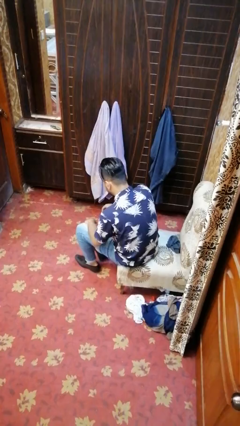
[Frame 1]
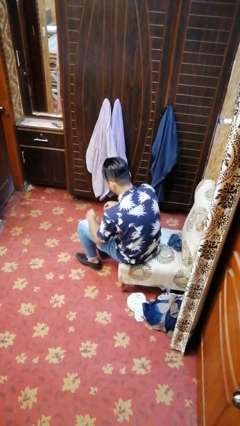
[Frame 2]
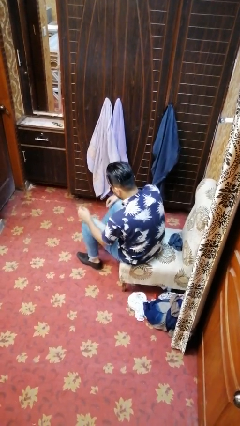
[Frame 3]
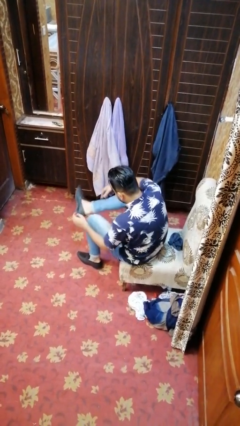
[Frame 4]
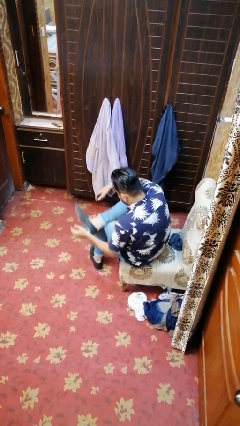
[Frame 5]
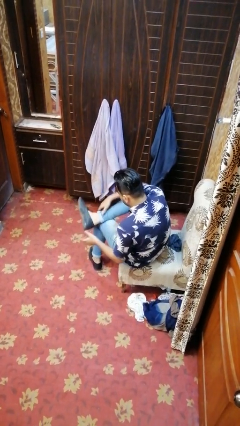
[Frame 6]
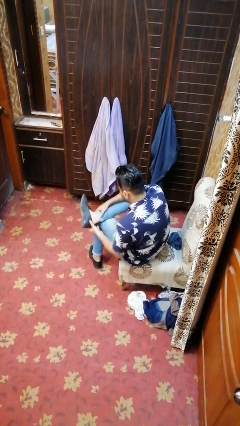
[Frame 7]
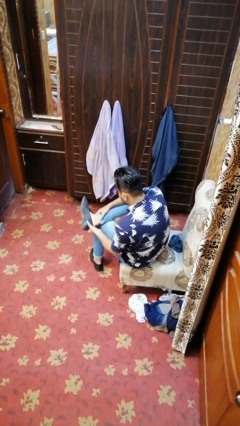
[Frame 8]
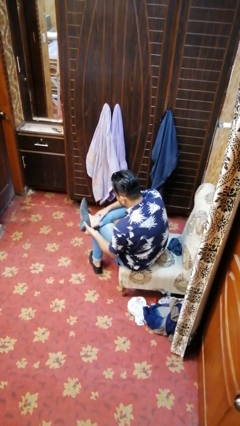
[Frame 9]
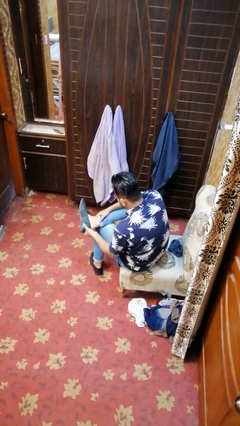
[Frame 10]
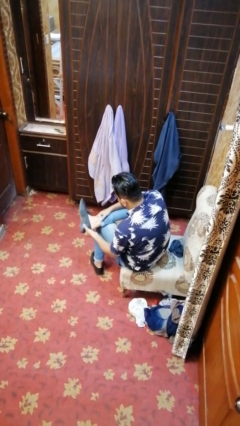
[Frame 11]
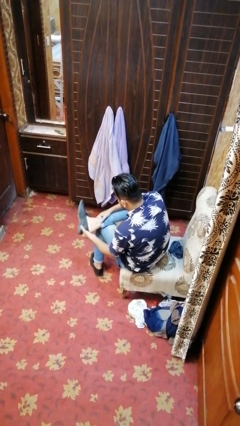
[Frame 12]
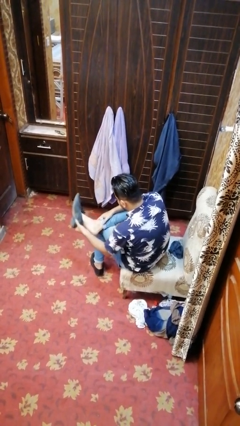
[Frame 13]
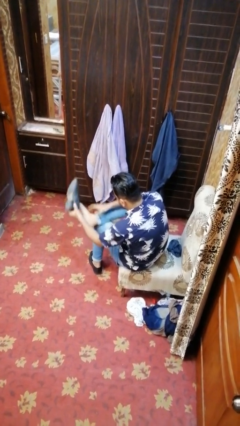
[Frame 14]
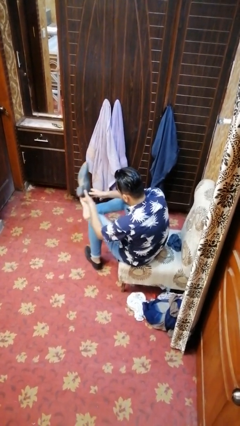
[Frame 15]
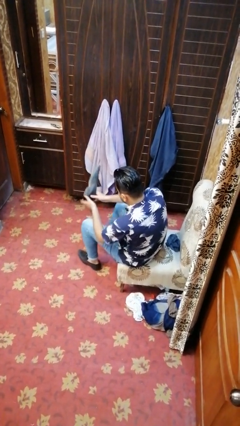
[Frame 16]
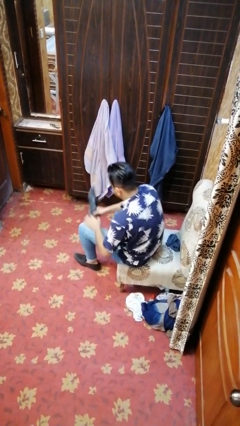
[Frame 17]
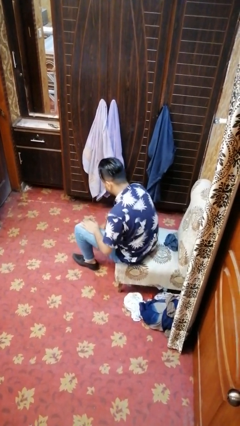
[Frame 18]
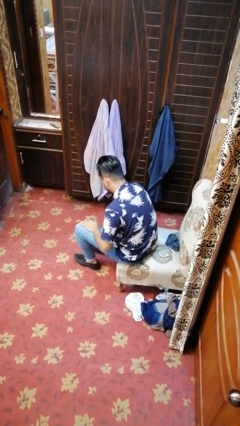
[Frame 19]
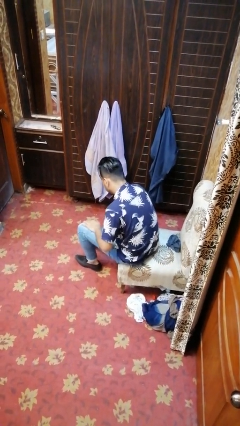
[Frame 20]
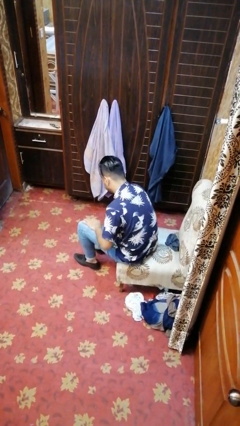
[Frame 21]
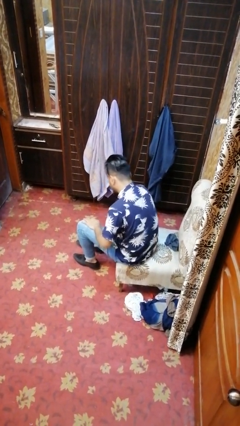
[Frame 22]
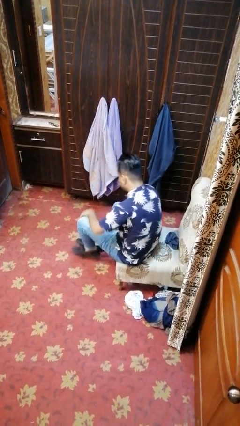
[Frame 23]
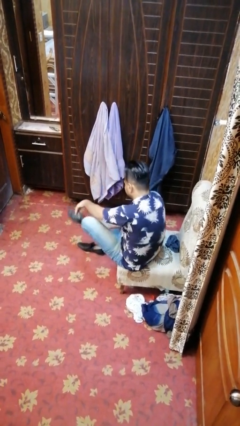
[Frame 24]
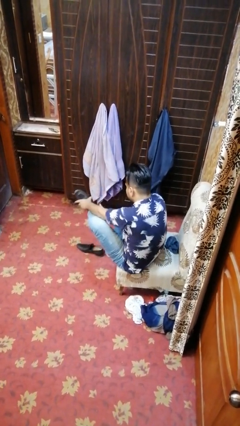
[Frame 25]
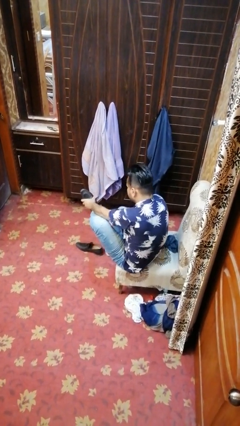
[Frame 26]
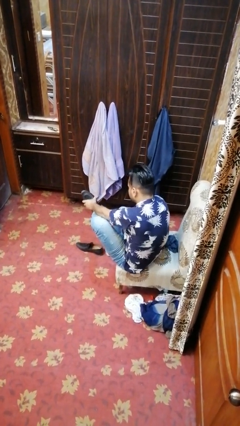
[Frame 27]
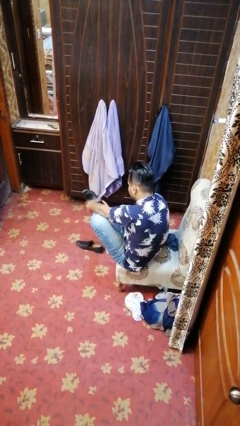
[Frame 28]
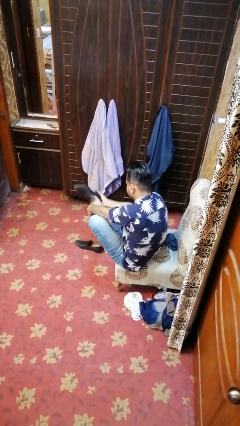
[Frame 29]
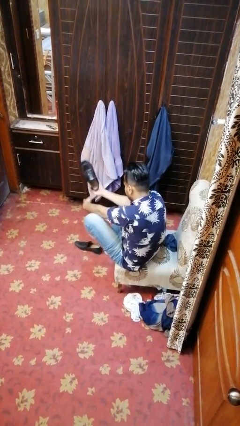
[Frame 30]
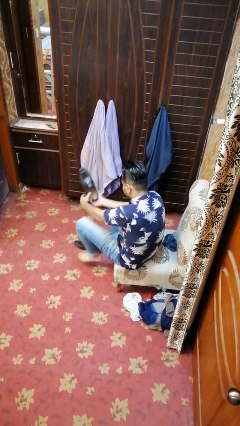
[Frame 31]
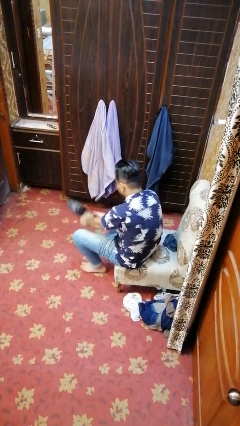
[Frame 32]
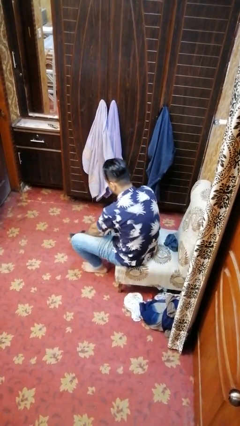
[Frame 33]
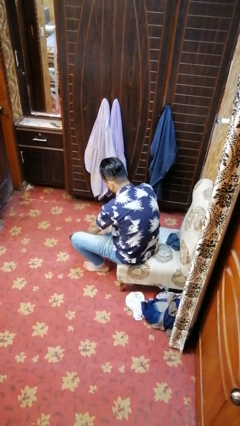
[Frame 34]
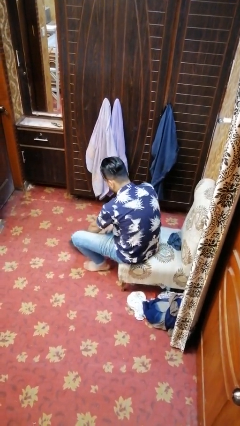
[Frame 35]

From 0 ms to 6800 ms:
person takes off shoes

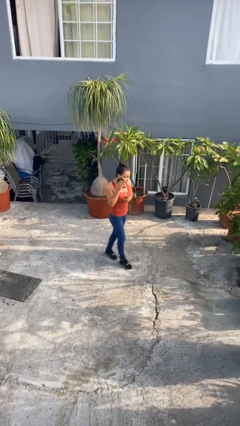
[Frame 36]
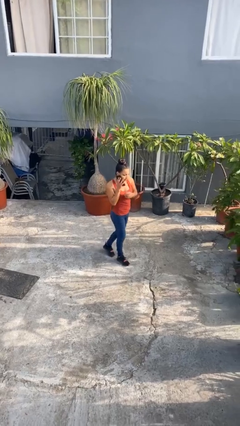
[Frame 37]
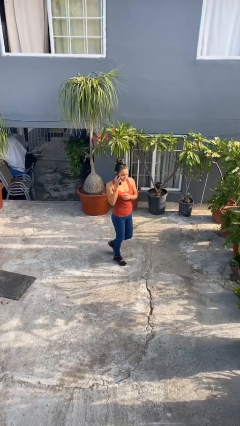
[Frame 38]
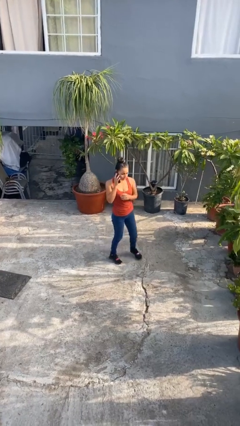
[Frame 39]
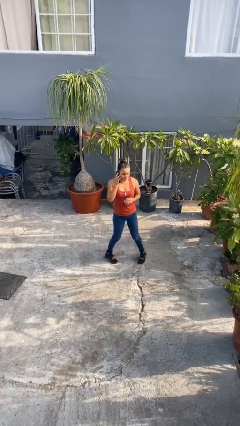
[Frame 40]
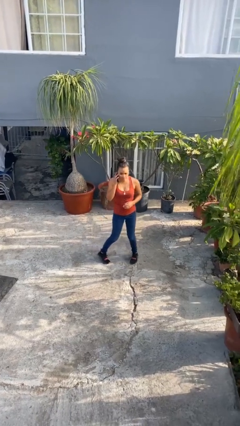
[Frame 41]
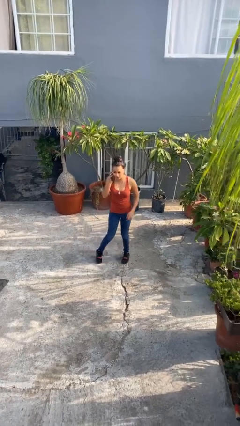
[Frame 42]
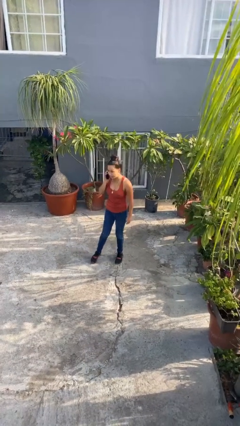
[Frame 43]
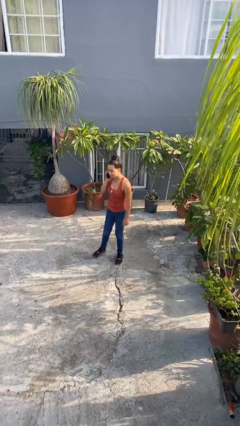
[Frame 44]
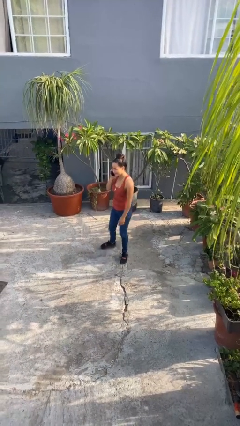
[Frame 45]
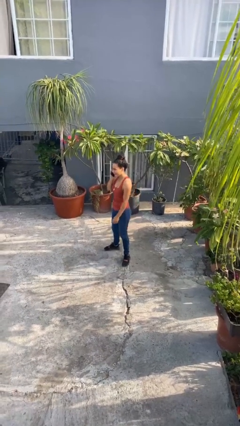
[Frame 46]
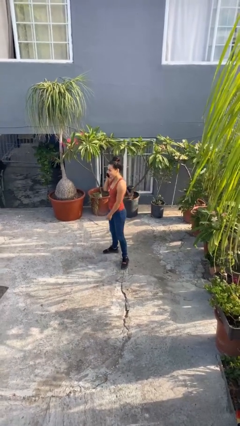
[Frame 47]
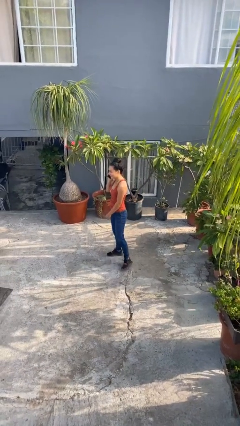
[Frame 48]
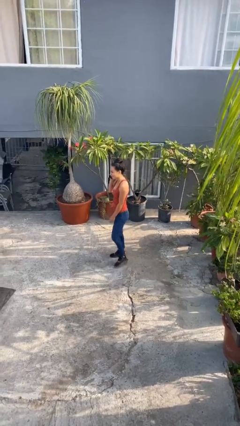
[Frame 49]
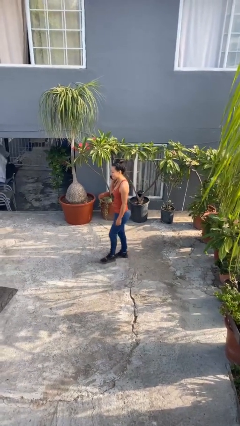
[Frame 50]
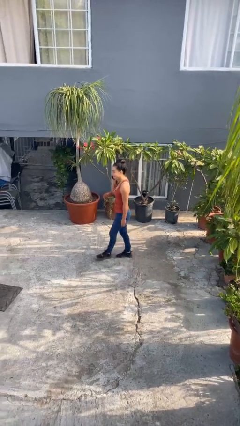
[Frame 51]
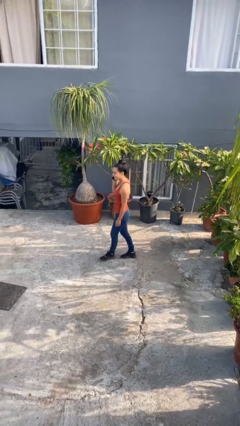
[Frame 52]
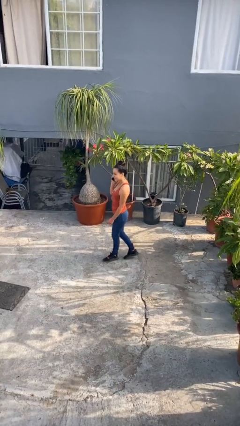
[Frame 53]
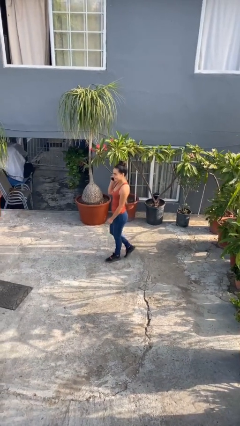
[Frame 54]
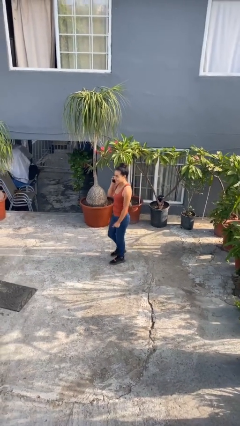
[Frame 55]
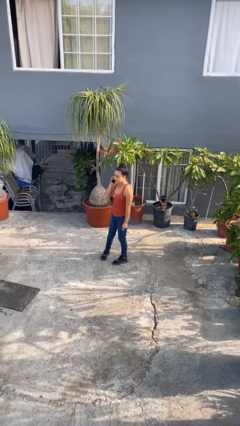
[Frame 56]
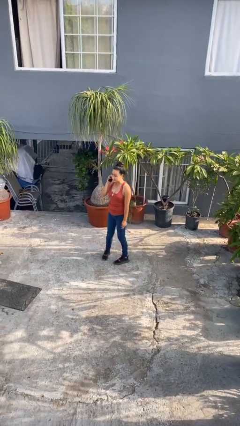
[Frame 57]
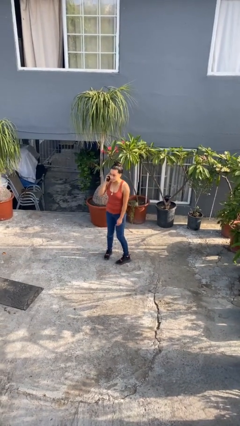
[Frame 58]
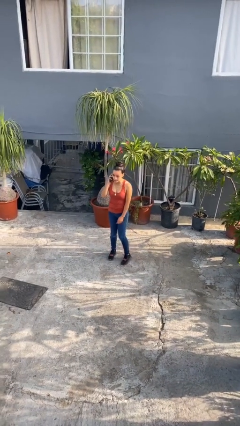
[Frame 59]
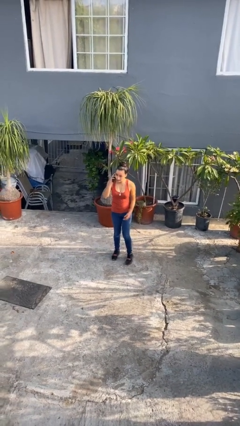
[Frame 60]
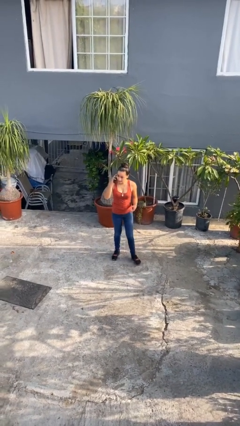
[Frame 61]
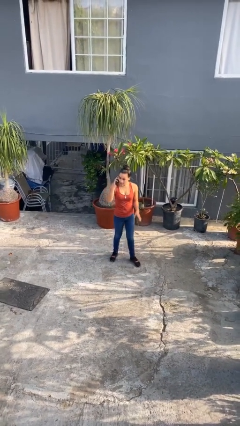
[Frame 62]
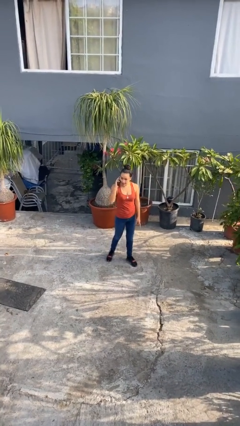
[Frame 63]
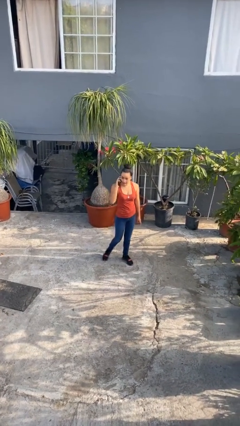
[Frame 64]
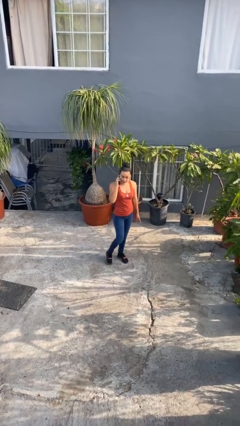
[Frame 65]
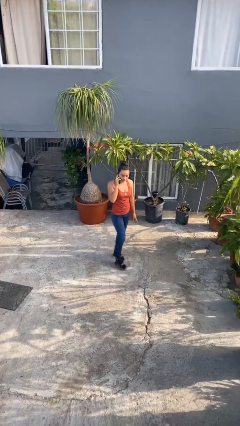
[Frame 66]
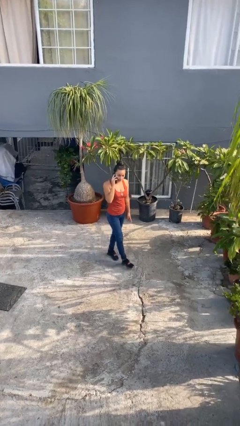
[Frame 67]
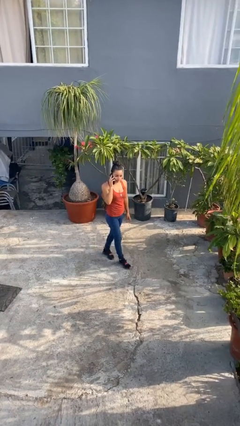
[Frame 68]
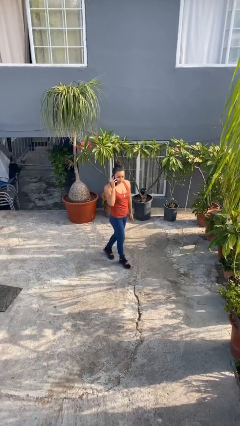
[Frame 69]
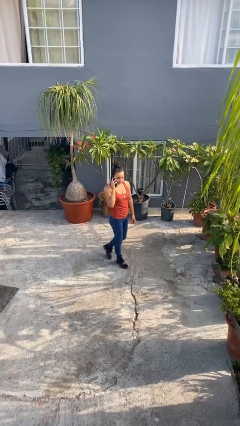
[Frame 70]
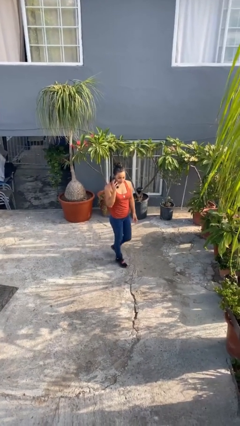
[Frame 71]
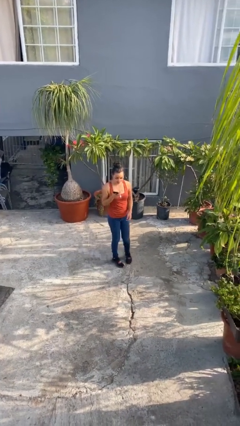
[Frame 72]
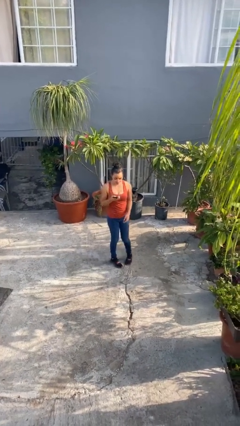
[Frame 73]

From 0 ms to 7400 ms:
person talks on phone

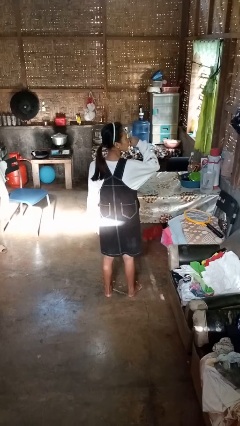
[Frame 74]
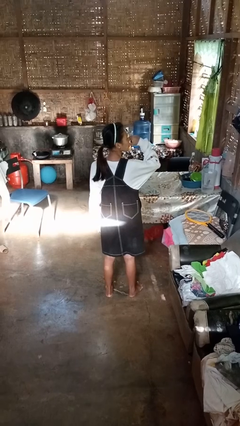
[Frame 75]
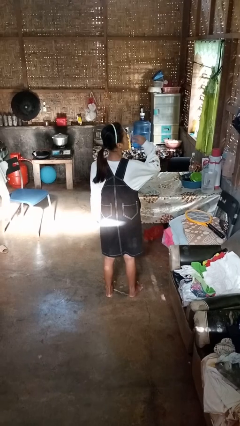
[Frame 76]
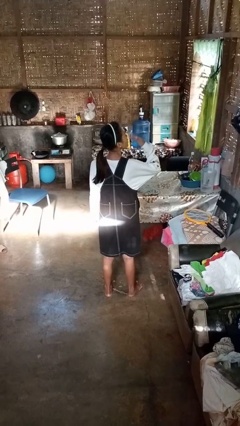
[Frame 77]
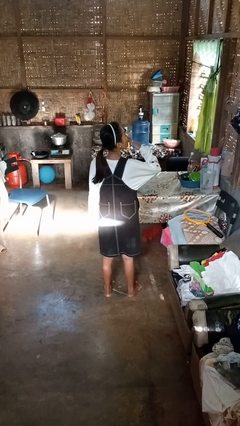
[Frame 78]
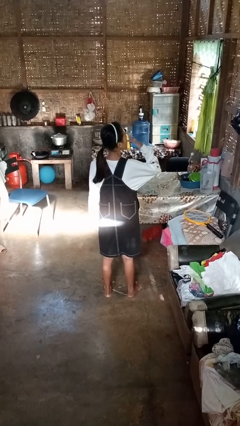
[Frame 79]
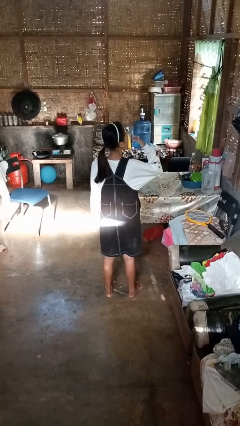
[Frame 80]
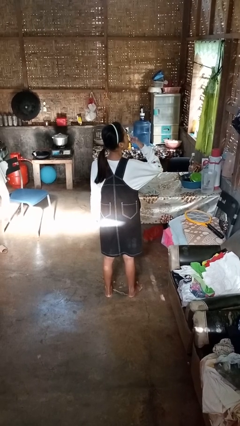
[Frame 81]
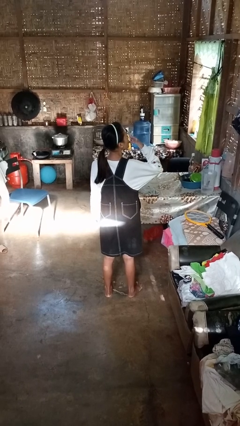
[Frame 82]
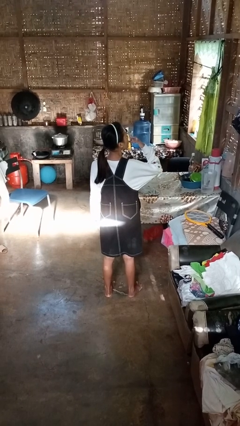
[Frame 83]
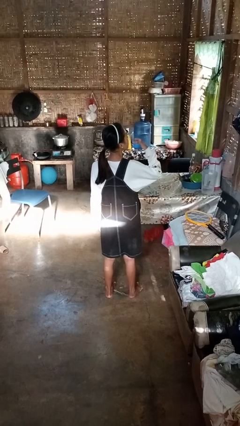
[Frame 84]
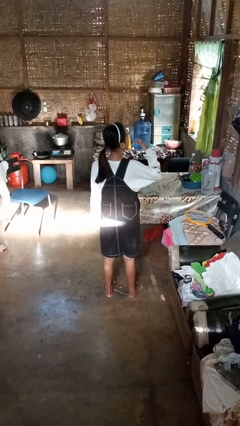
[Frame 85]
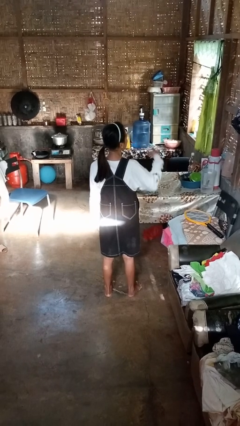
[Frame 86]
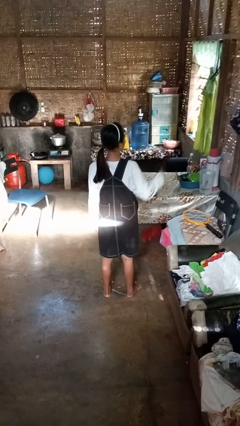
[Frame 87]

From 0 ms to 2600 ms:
person licks fingers

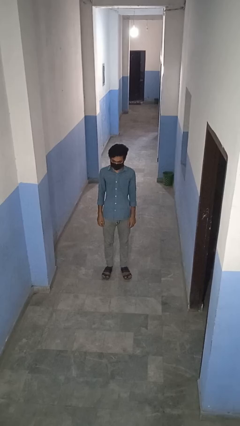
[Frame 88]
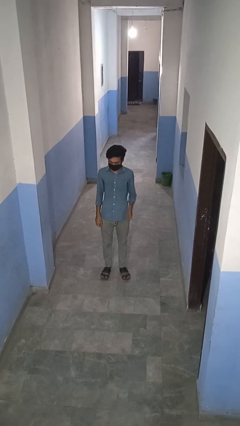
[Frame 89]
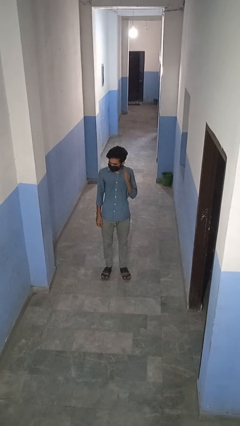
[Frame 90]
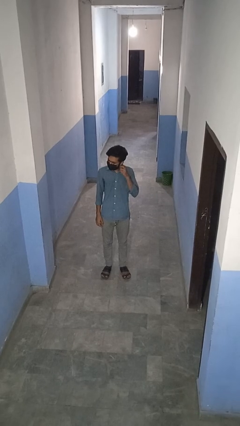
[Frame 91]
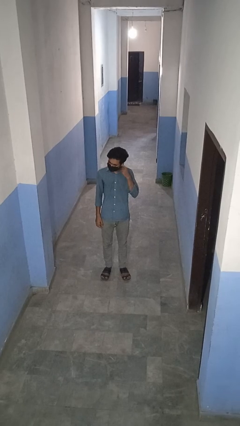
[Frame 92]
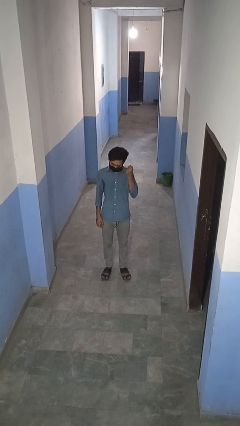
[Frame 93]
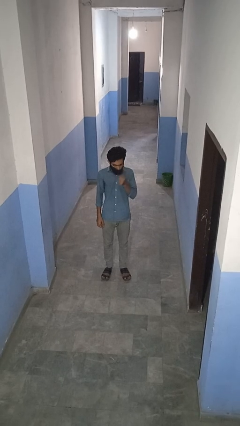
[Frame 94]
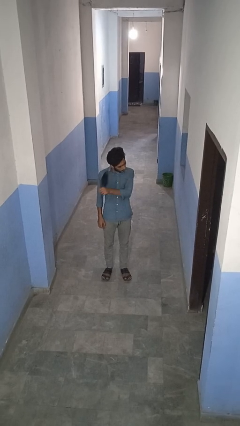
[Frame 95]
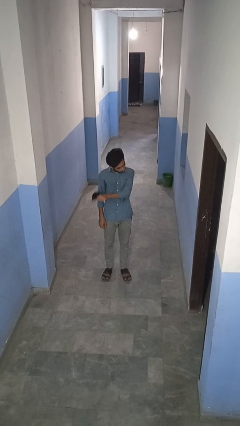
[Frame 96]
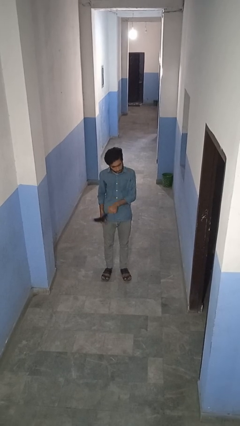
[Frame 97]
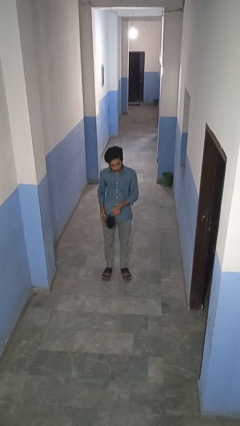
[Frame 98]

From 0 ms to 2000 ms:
person takes off facemask
